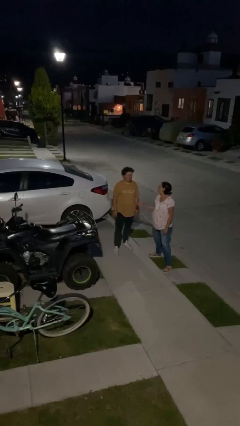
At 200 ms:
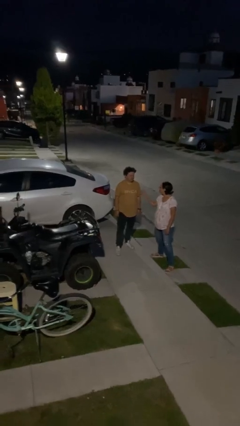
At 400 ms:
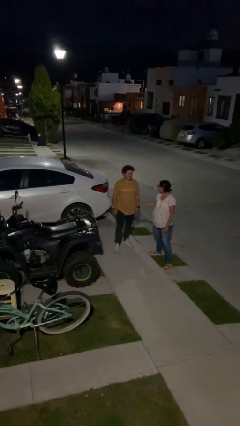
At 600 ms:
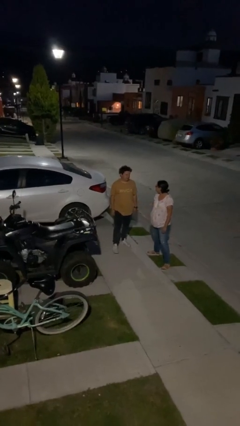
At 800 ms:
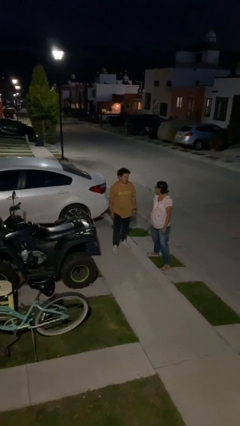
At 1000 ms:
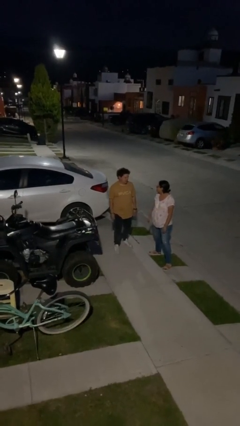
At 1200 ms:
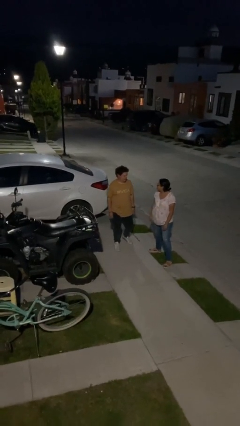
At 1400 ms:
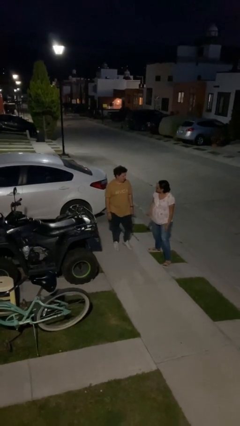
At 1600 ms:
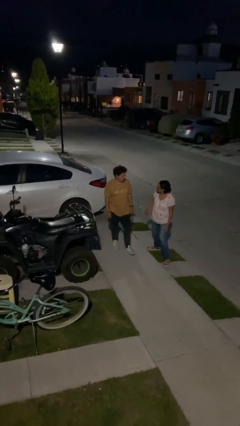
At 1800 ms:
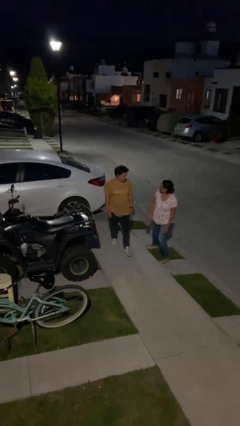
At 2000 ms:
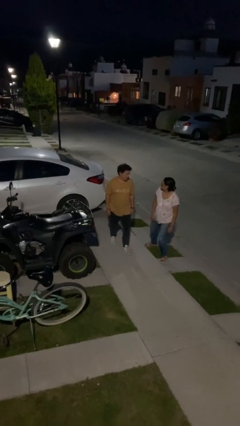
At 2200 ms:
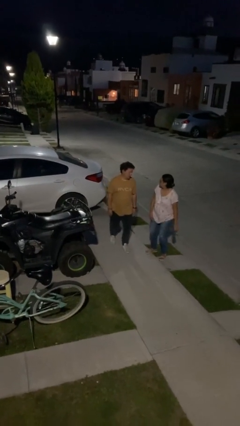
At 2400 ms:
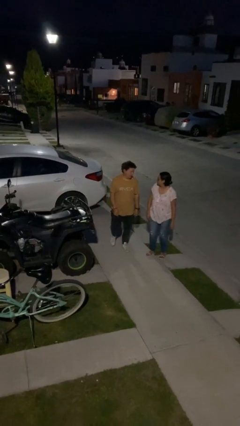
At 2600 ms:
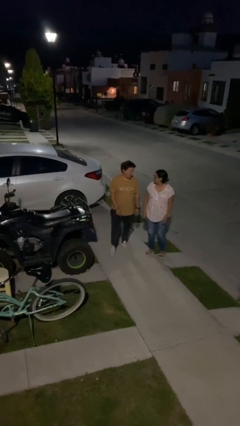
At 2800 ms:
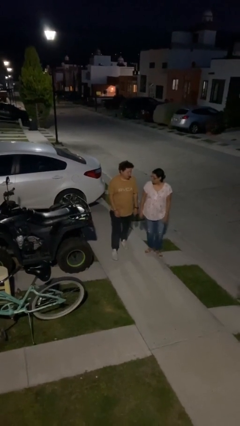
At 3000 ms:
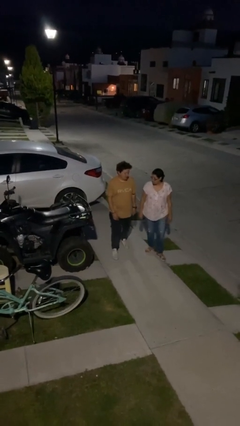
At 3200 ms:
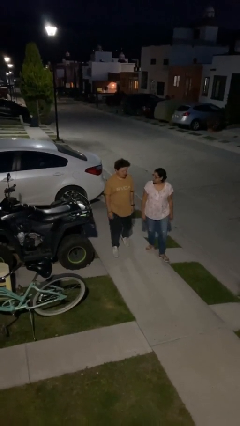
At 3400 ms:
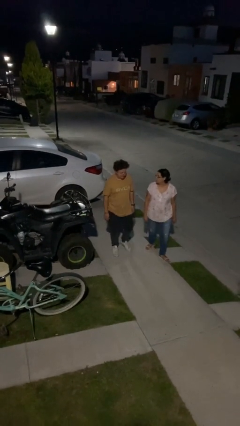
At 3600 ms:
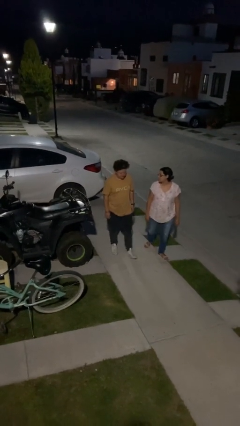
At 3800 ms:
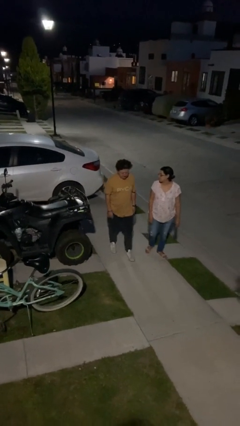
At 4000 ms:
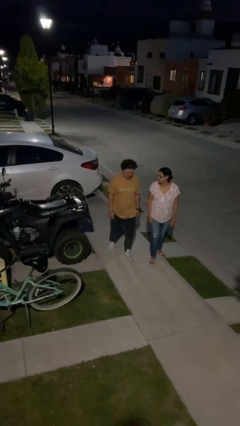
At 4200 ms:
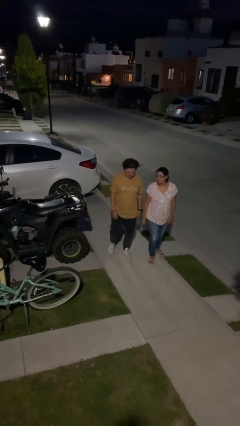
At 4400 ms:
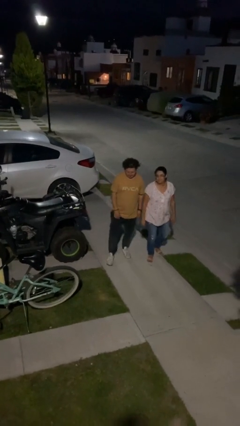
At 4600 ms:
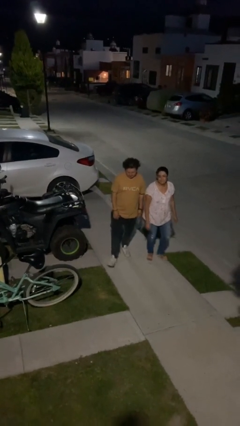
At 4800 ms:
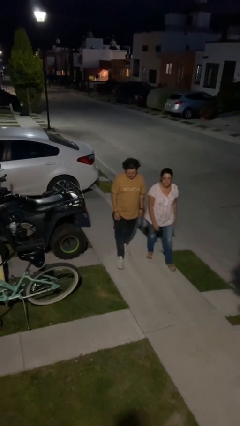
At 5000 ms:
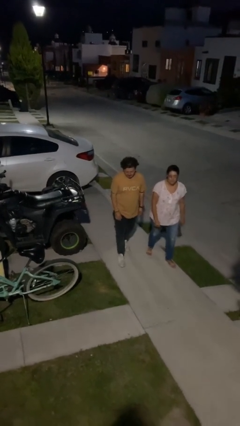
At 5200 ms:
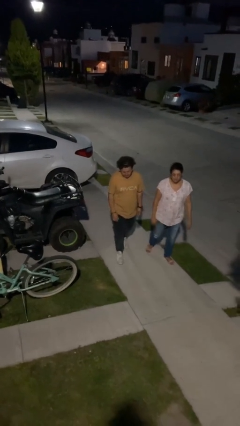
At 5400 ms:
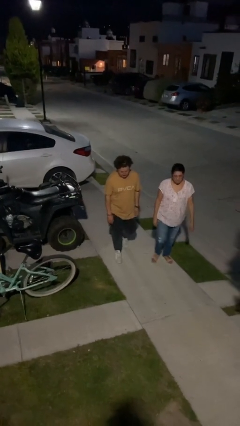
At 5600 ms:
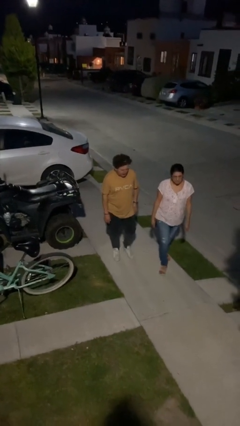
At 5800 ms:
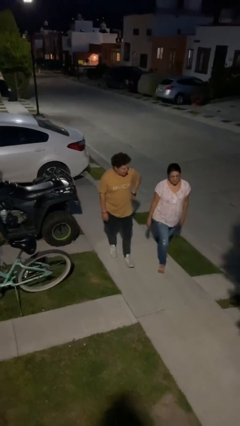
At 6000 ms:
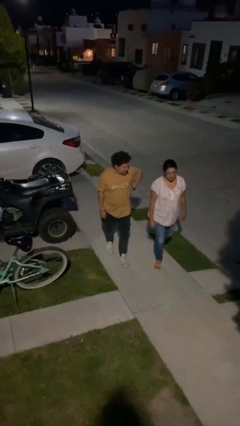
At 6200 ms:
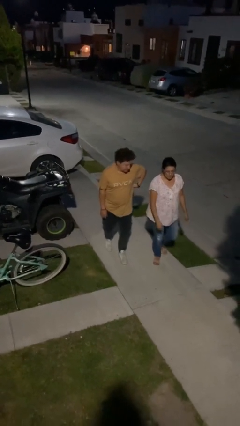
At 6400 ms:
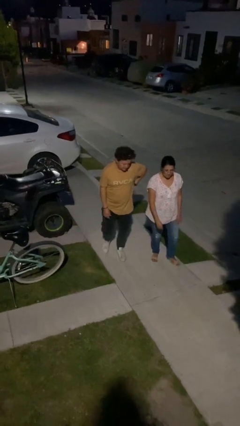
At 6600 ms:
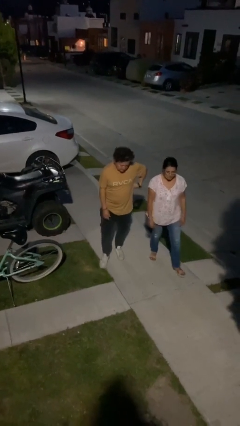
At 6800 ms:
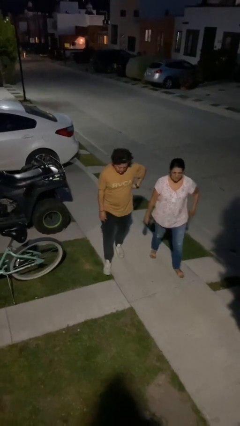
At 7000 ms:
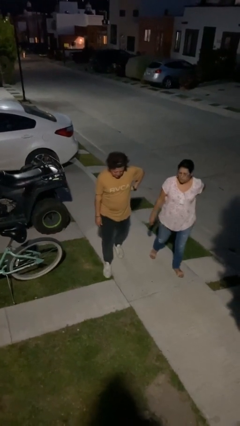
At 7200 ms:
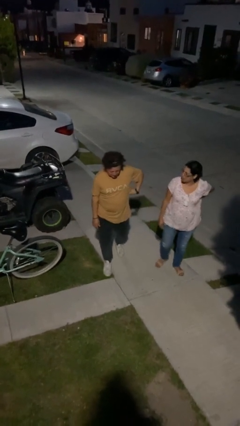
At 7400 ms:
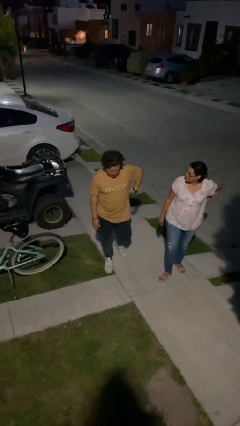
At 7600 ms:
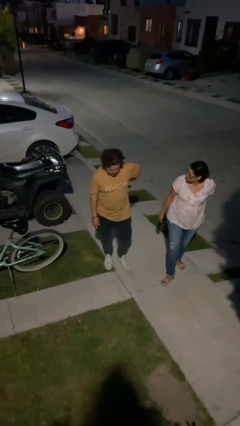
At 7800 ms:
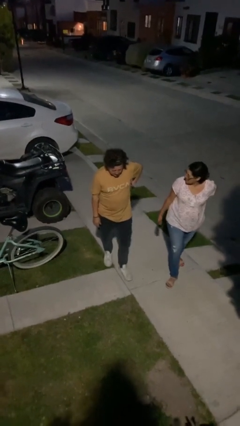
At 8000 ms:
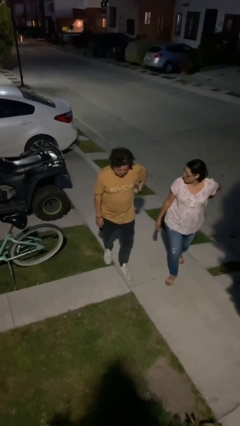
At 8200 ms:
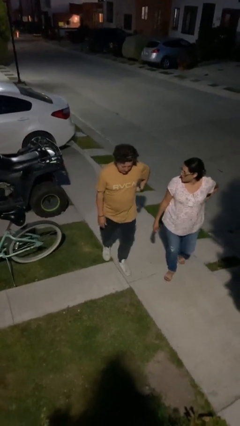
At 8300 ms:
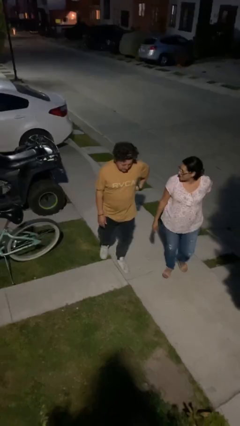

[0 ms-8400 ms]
person talks to person

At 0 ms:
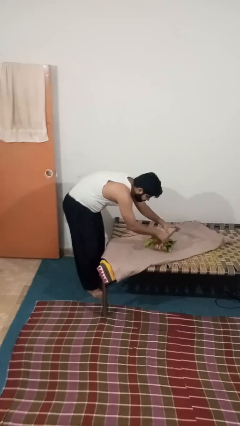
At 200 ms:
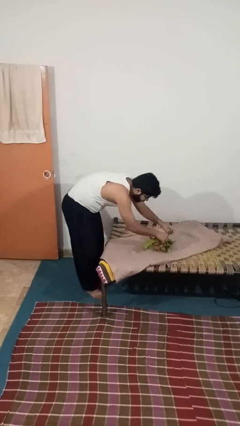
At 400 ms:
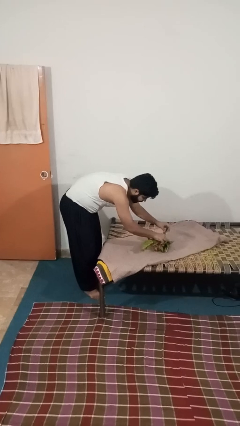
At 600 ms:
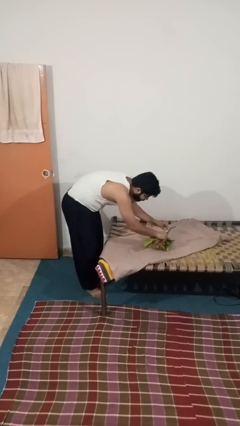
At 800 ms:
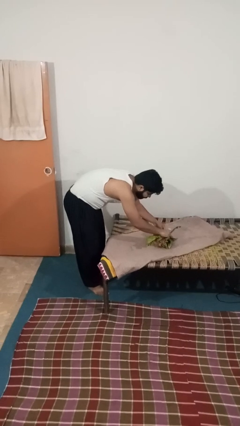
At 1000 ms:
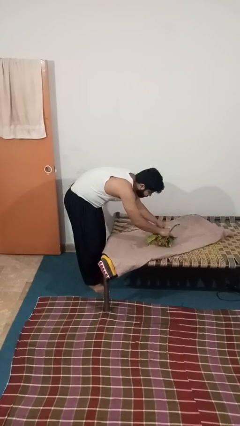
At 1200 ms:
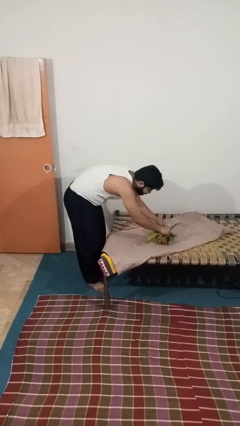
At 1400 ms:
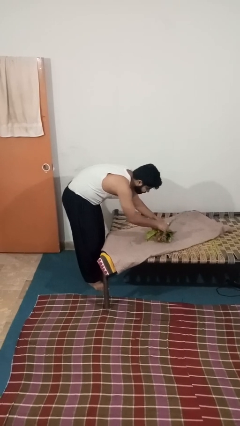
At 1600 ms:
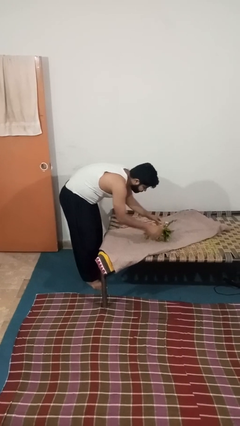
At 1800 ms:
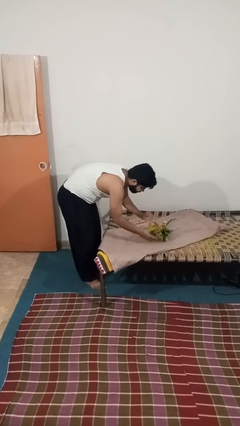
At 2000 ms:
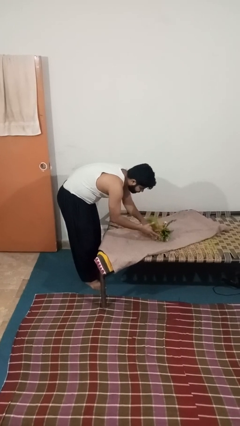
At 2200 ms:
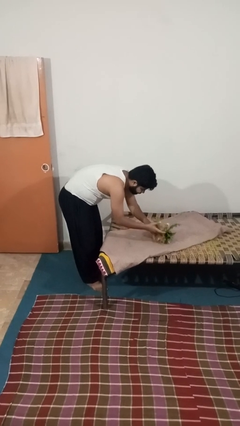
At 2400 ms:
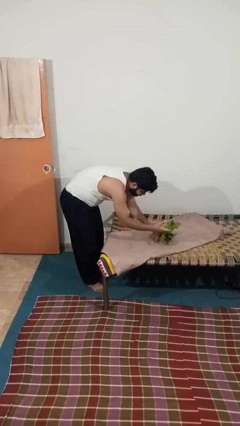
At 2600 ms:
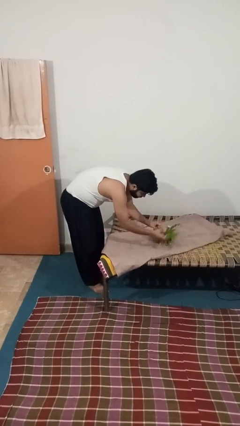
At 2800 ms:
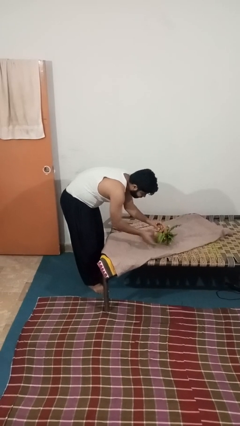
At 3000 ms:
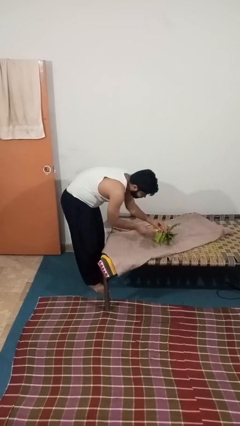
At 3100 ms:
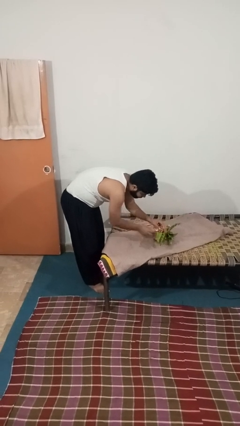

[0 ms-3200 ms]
person arranges flowers in vase

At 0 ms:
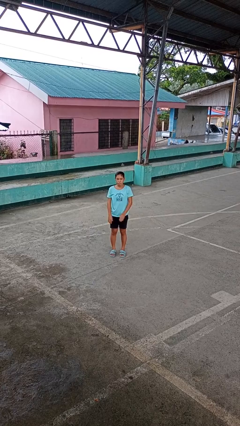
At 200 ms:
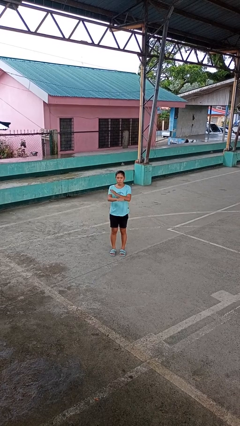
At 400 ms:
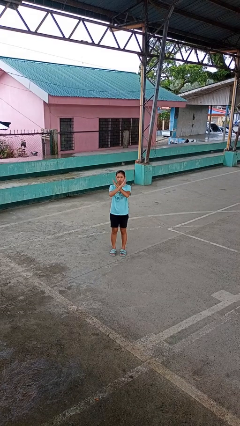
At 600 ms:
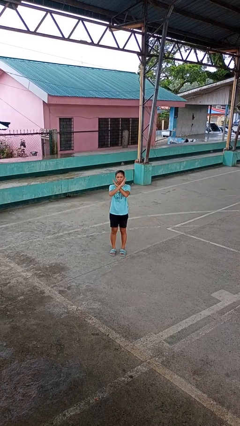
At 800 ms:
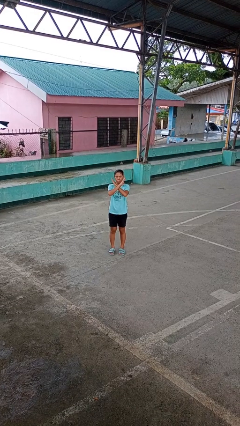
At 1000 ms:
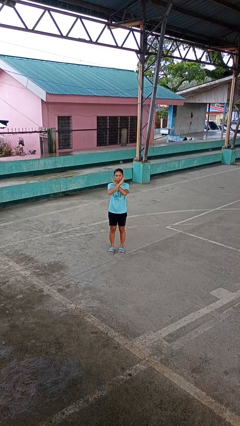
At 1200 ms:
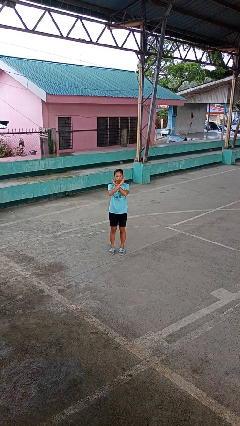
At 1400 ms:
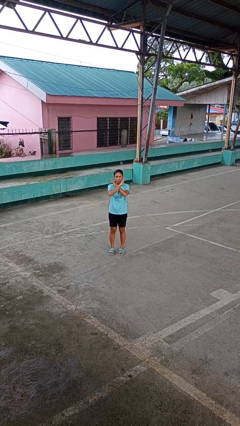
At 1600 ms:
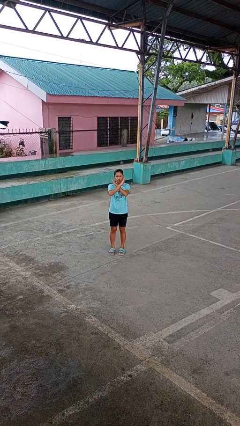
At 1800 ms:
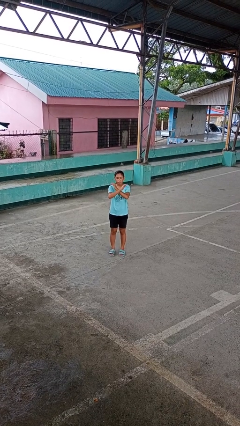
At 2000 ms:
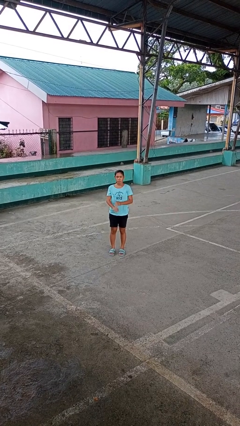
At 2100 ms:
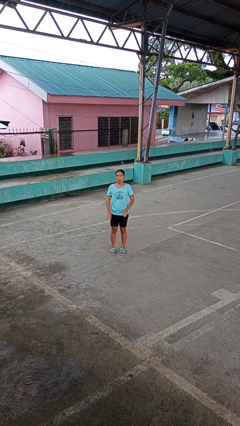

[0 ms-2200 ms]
person gestures arms x

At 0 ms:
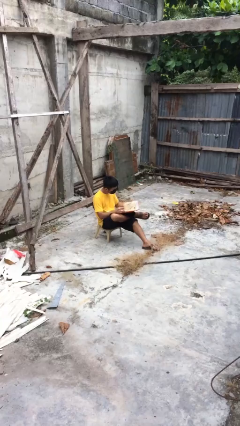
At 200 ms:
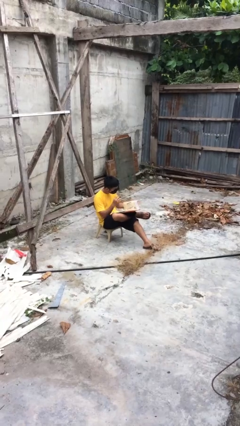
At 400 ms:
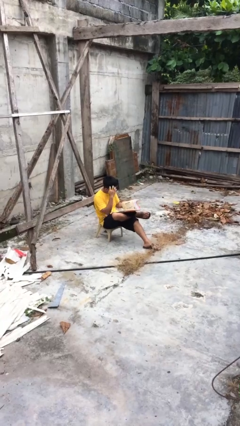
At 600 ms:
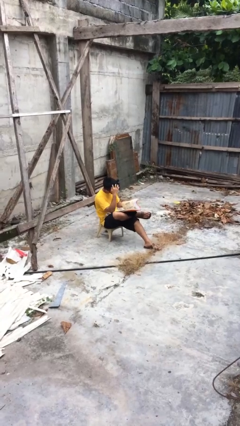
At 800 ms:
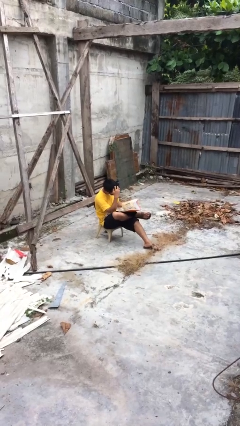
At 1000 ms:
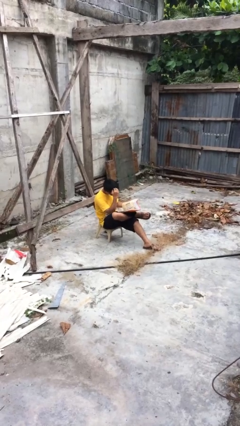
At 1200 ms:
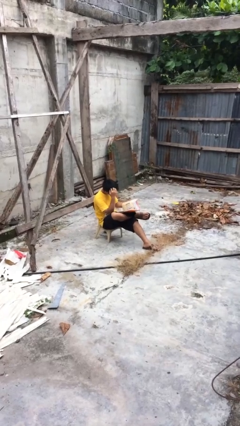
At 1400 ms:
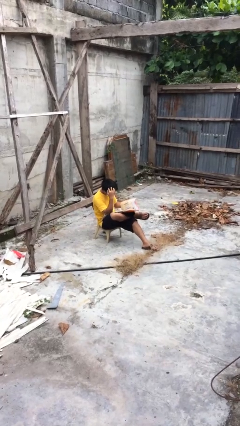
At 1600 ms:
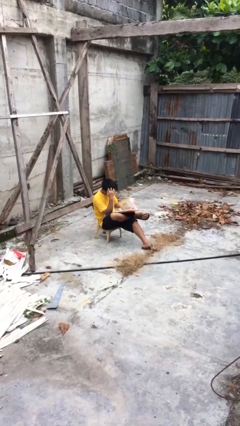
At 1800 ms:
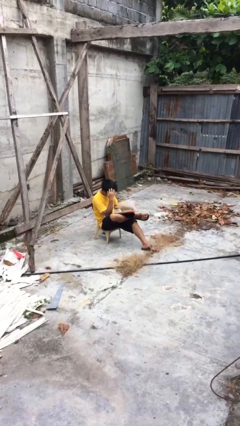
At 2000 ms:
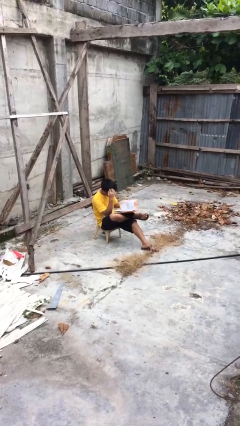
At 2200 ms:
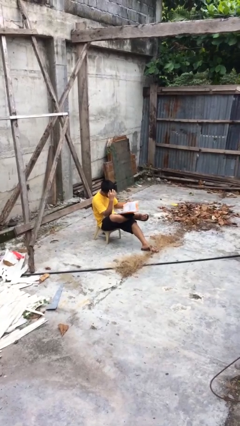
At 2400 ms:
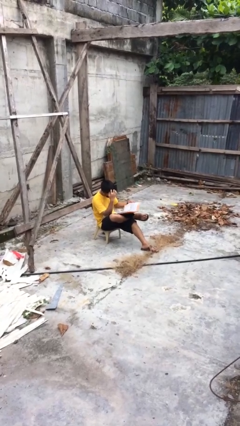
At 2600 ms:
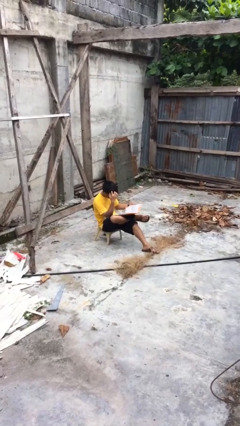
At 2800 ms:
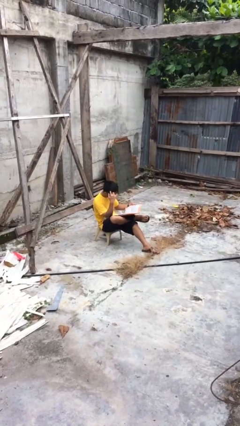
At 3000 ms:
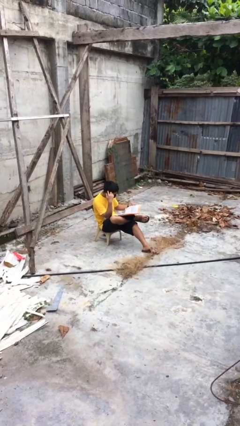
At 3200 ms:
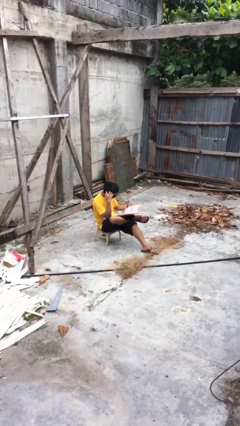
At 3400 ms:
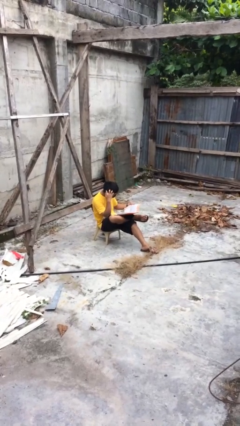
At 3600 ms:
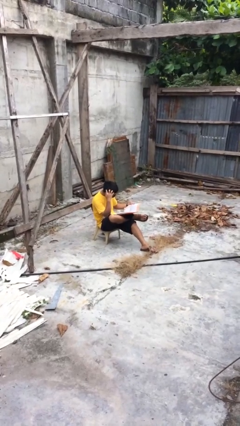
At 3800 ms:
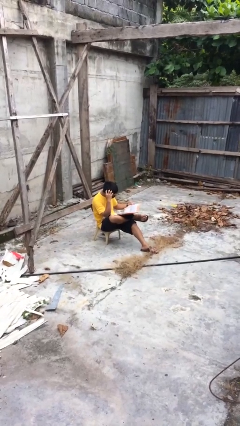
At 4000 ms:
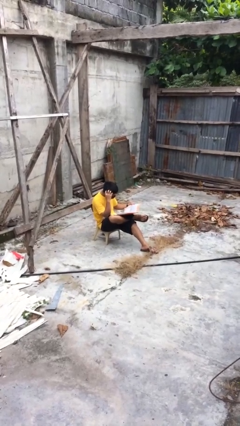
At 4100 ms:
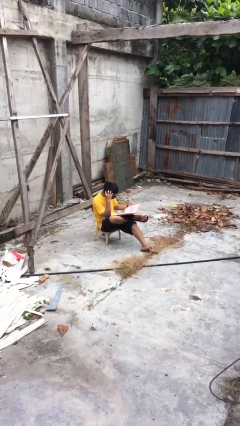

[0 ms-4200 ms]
person reads document
